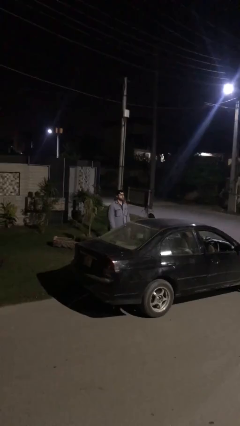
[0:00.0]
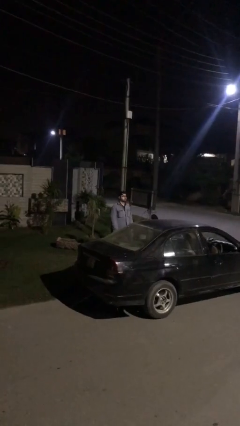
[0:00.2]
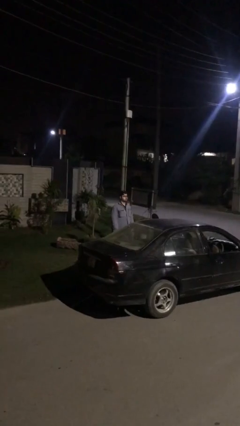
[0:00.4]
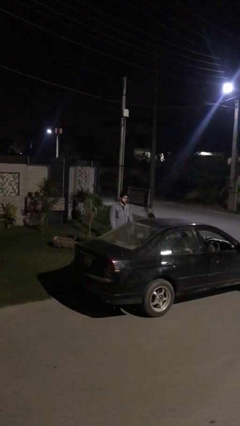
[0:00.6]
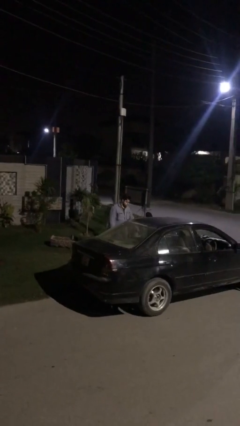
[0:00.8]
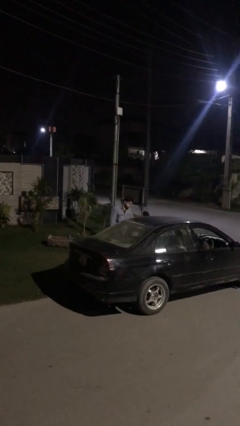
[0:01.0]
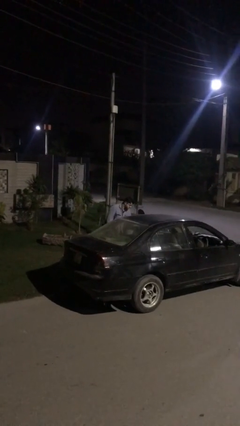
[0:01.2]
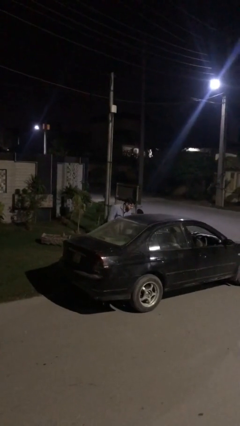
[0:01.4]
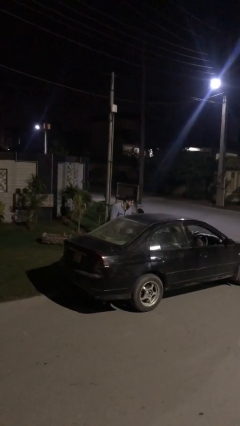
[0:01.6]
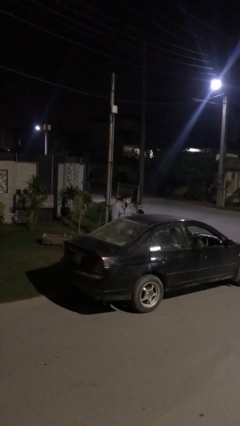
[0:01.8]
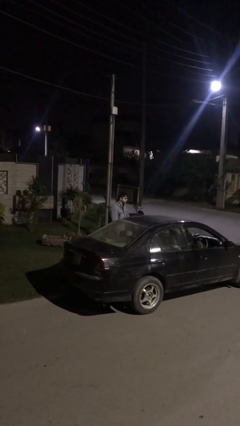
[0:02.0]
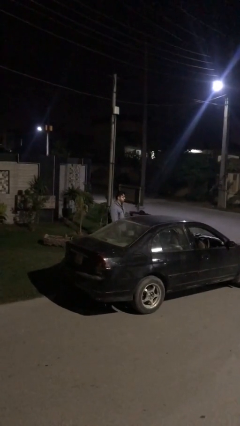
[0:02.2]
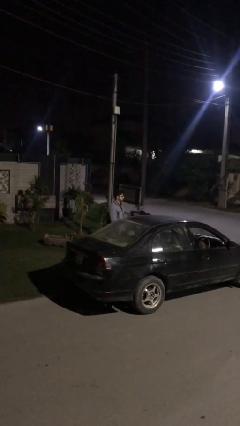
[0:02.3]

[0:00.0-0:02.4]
person opens car door

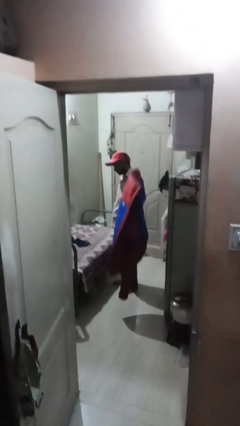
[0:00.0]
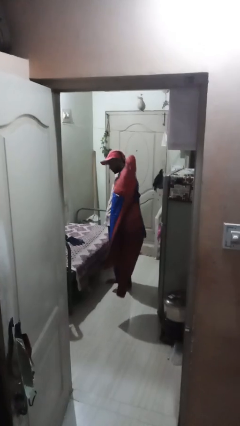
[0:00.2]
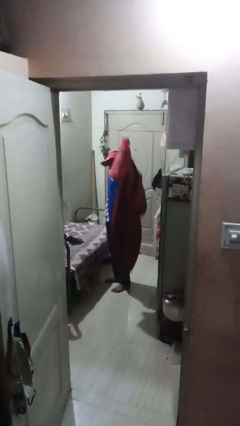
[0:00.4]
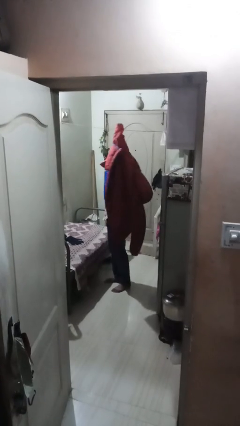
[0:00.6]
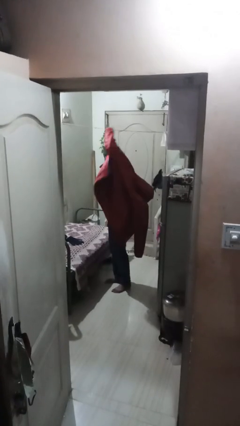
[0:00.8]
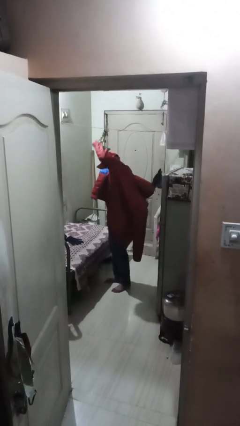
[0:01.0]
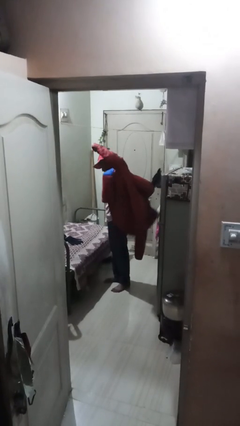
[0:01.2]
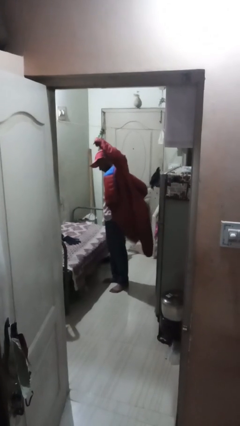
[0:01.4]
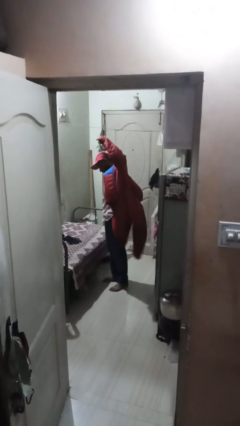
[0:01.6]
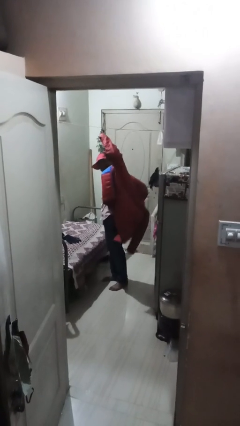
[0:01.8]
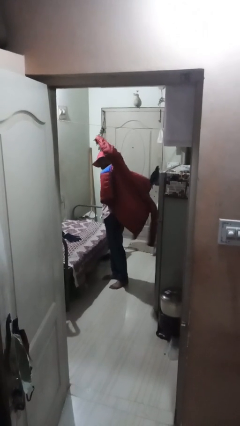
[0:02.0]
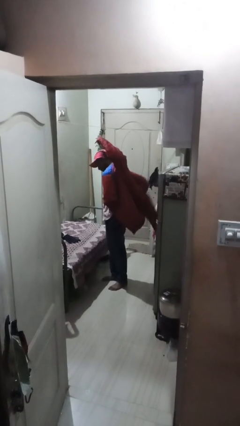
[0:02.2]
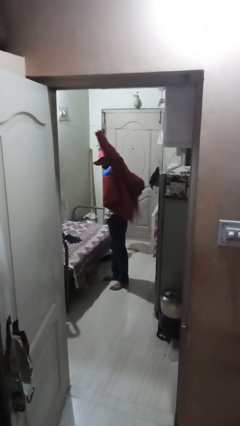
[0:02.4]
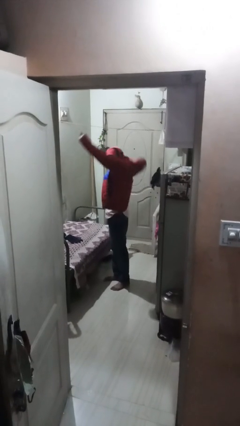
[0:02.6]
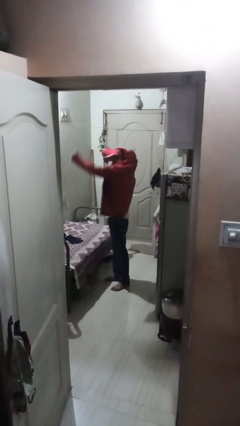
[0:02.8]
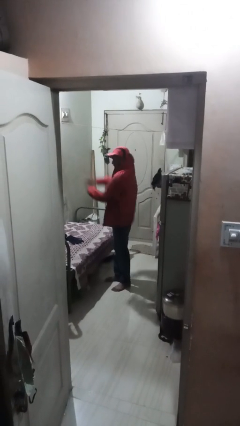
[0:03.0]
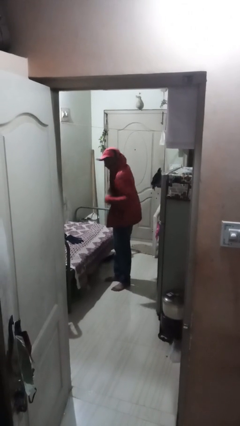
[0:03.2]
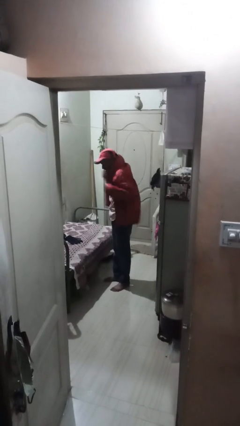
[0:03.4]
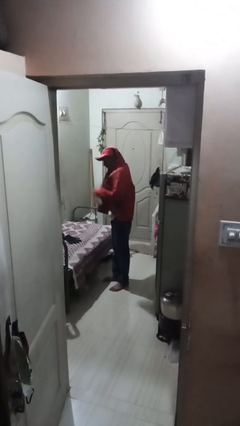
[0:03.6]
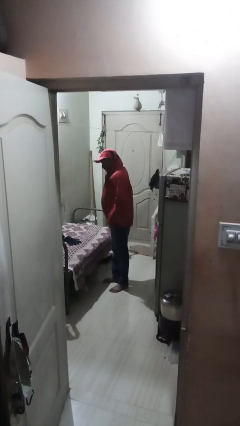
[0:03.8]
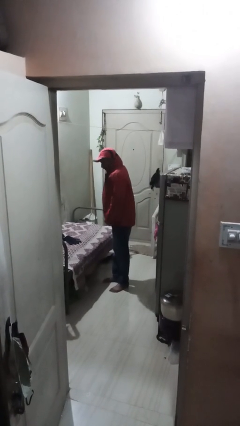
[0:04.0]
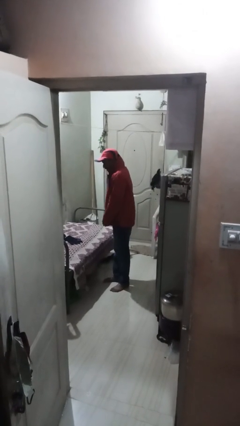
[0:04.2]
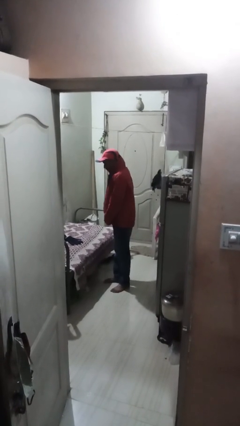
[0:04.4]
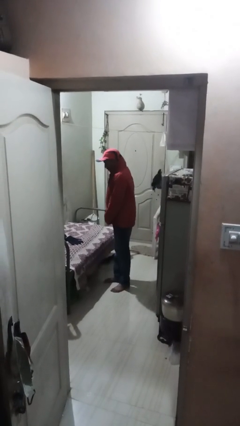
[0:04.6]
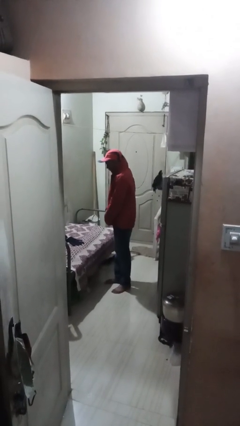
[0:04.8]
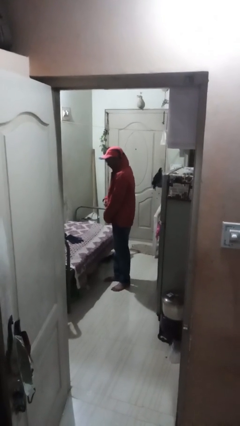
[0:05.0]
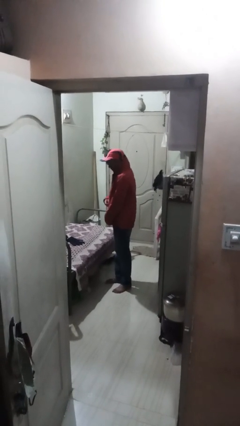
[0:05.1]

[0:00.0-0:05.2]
person puts on jacket

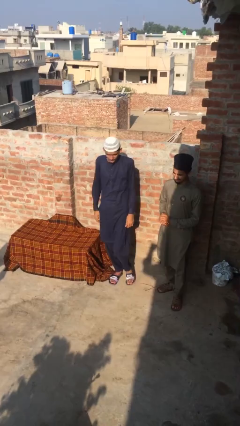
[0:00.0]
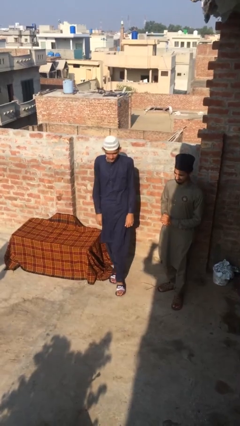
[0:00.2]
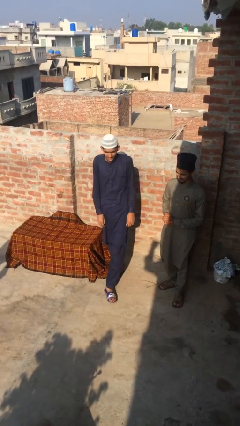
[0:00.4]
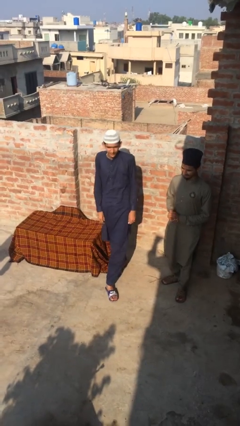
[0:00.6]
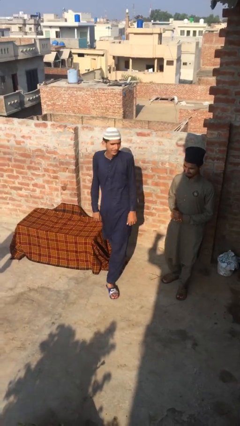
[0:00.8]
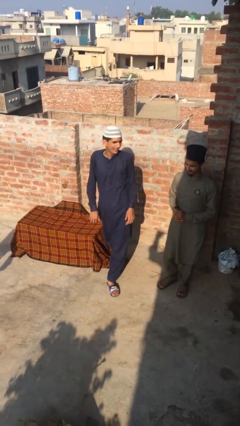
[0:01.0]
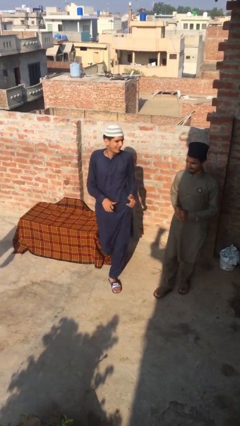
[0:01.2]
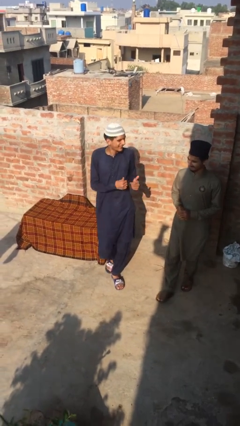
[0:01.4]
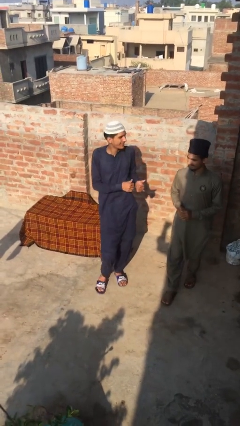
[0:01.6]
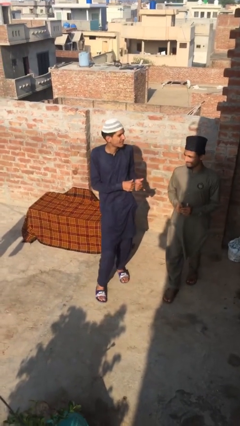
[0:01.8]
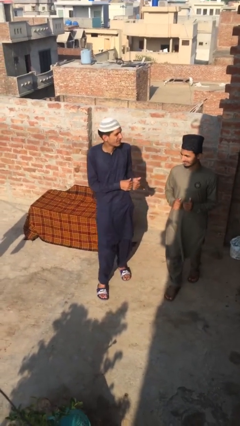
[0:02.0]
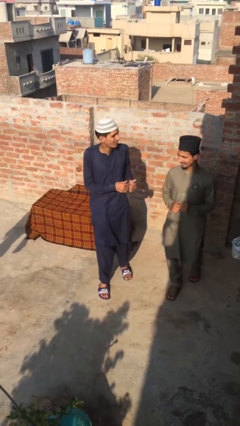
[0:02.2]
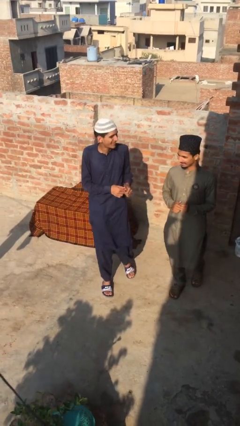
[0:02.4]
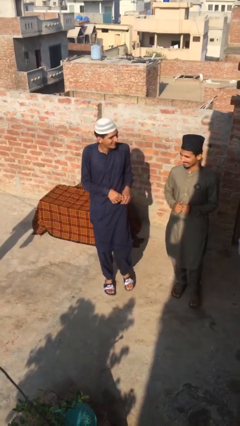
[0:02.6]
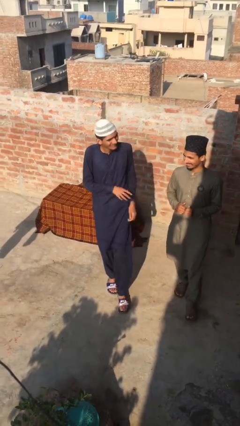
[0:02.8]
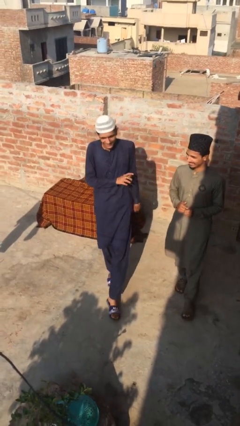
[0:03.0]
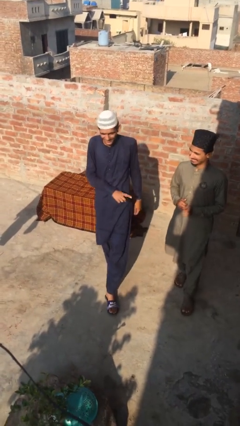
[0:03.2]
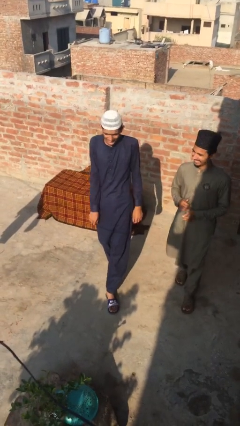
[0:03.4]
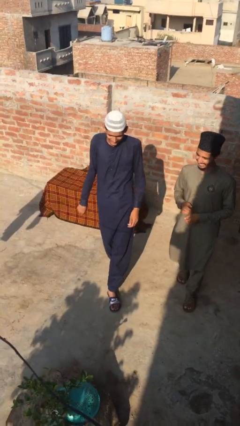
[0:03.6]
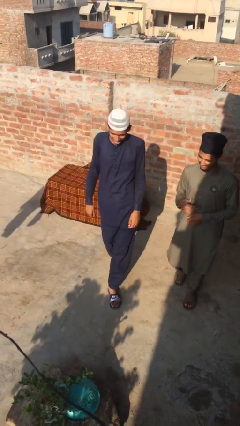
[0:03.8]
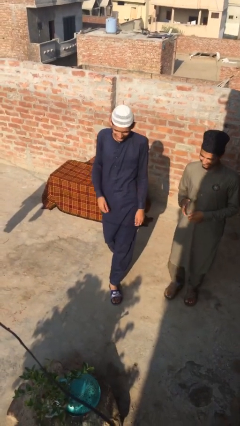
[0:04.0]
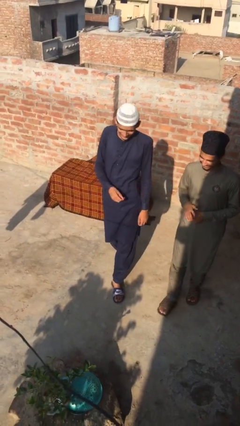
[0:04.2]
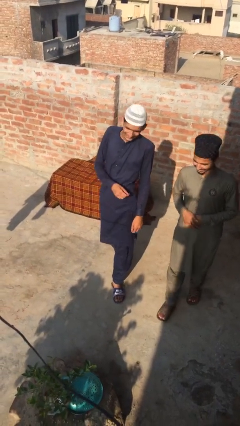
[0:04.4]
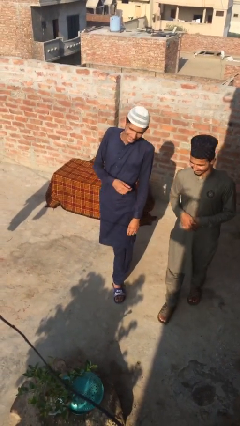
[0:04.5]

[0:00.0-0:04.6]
person talks to person

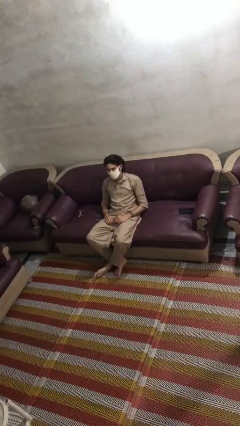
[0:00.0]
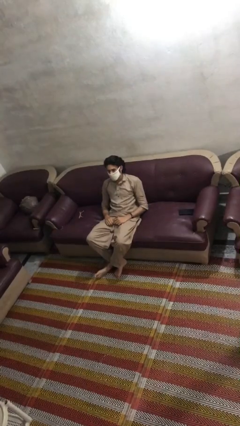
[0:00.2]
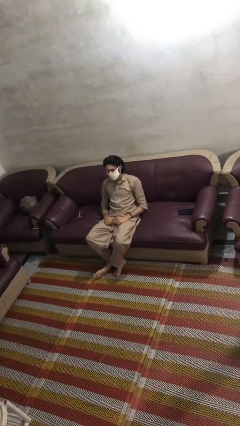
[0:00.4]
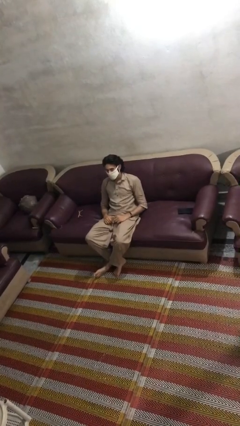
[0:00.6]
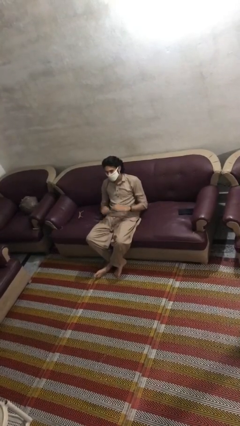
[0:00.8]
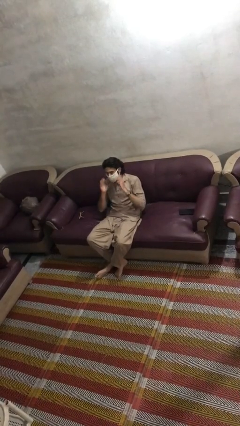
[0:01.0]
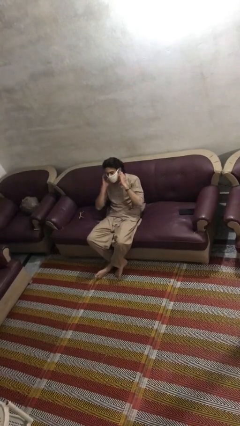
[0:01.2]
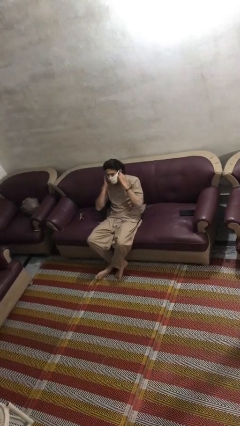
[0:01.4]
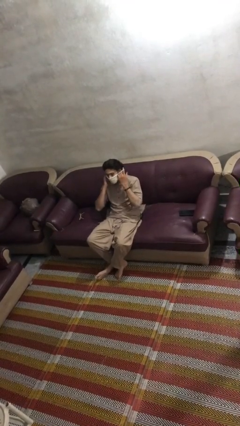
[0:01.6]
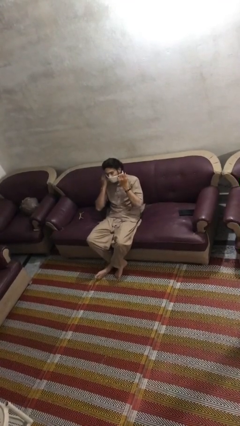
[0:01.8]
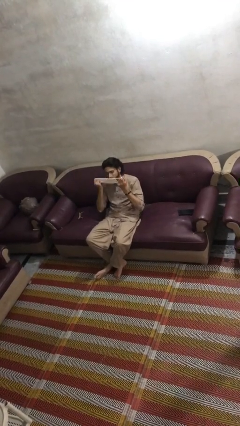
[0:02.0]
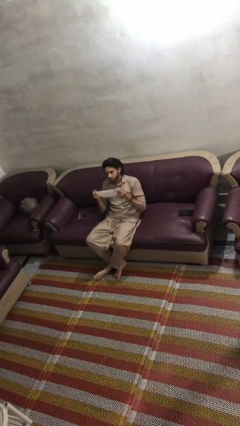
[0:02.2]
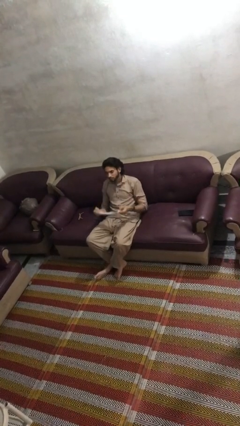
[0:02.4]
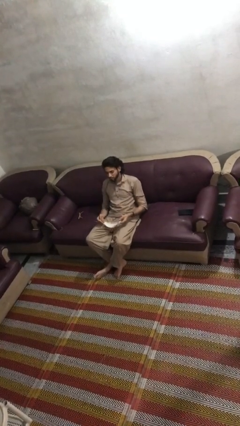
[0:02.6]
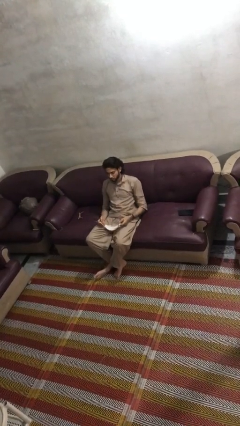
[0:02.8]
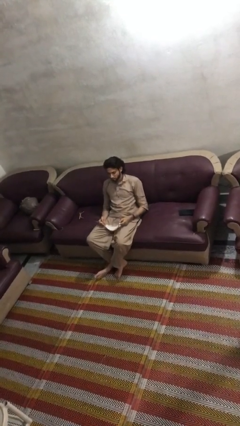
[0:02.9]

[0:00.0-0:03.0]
person takes off facemask

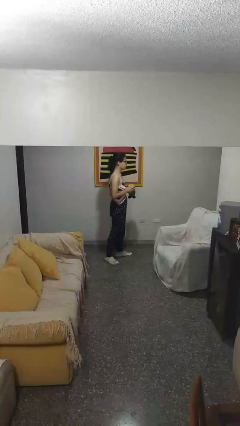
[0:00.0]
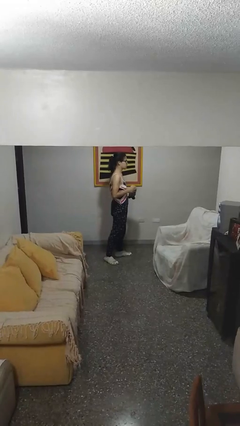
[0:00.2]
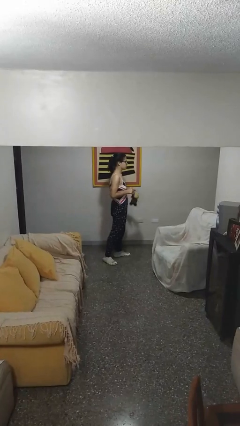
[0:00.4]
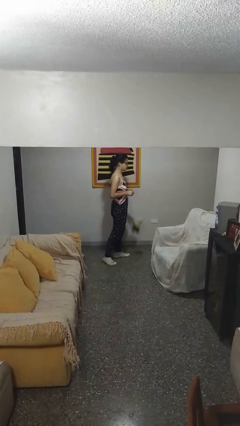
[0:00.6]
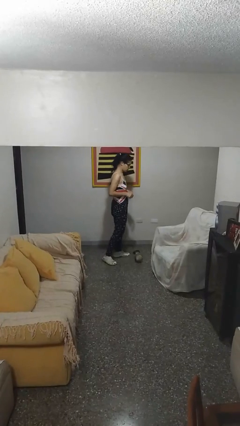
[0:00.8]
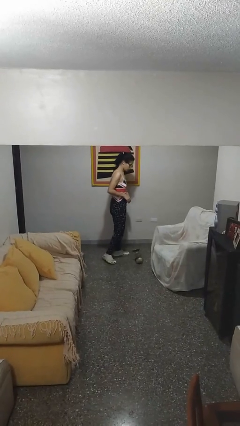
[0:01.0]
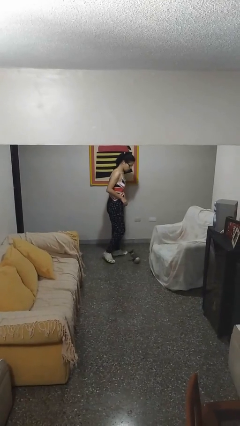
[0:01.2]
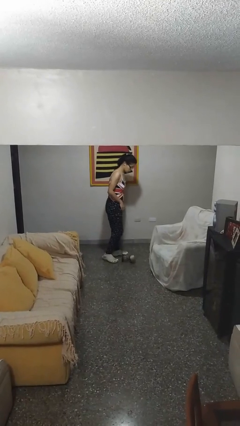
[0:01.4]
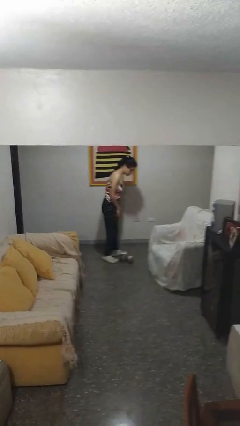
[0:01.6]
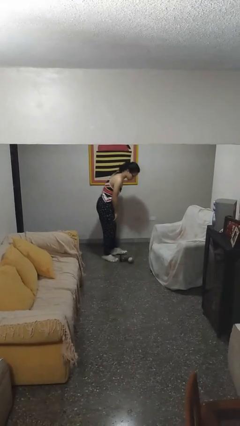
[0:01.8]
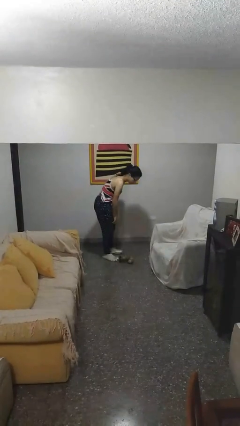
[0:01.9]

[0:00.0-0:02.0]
person drops object
